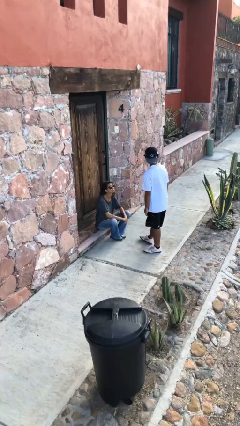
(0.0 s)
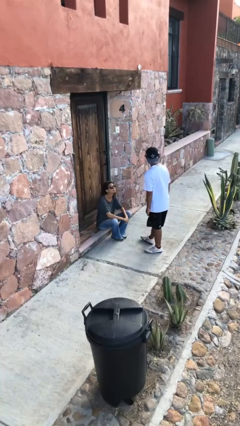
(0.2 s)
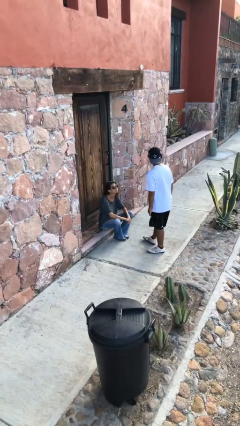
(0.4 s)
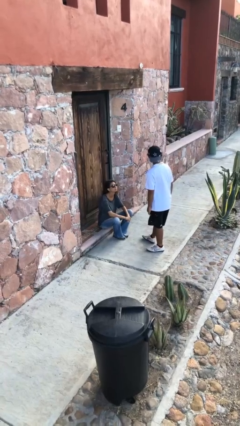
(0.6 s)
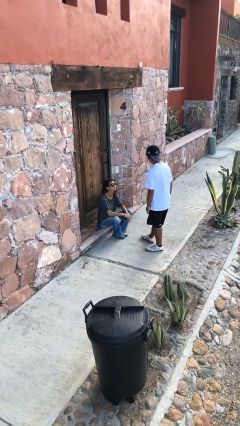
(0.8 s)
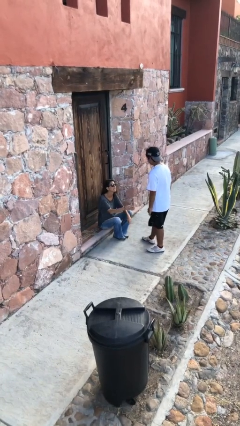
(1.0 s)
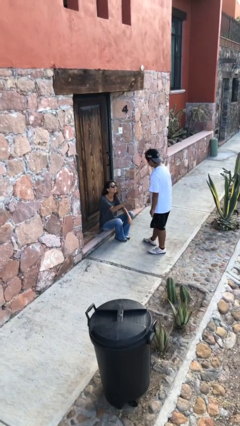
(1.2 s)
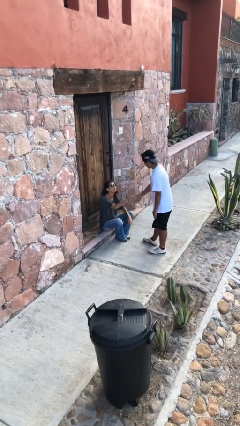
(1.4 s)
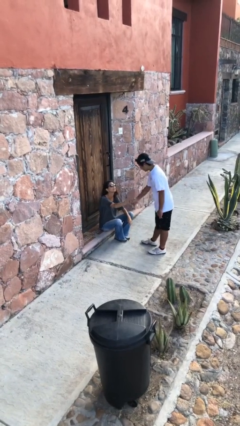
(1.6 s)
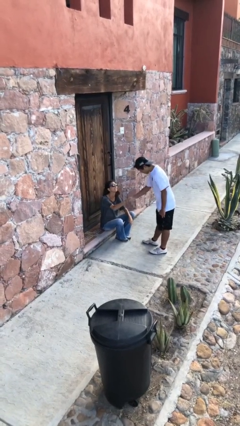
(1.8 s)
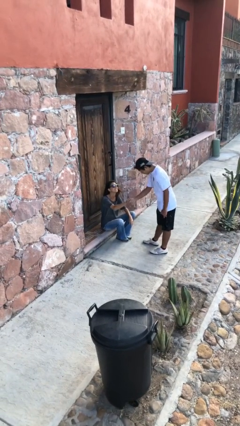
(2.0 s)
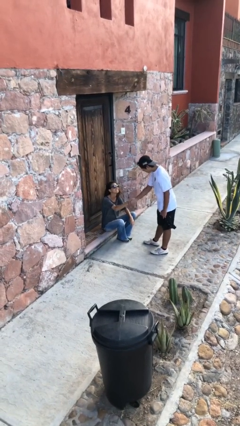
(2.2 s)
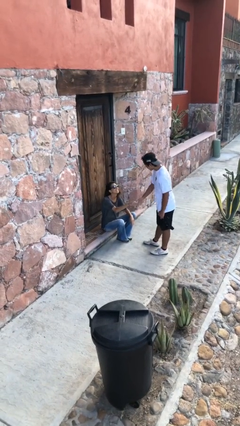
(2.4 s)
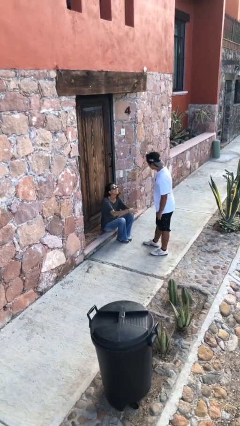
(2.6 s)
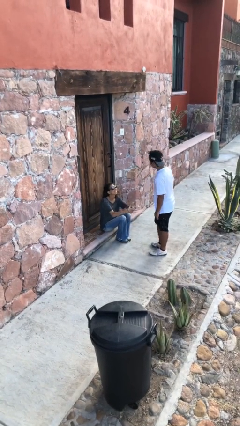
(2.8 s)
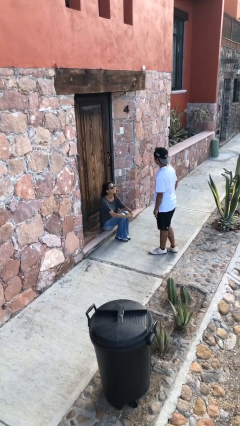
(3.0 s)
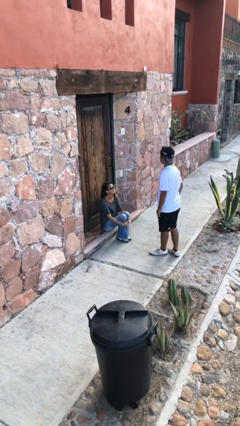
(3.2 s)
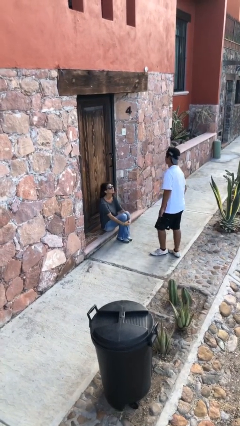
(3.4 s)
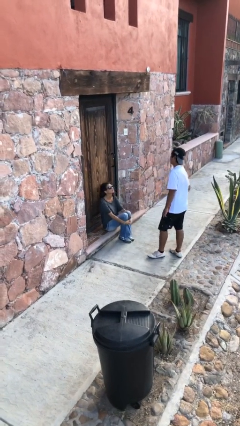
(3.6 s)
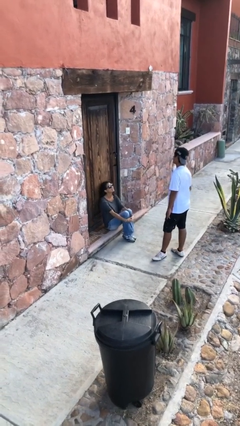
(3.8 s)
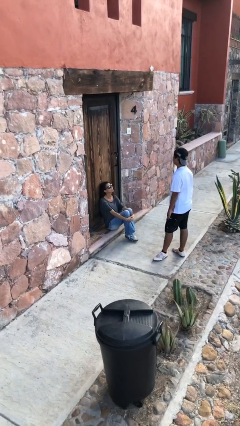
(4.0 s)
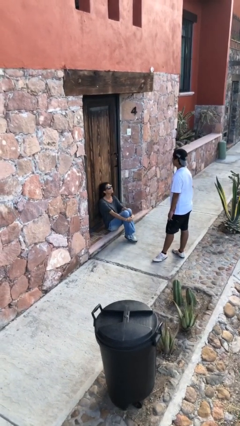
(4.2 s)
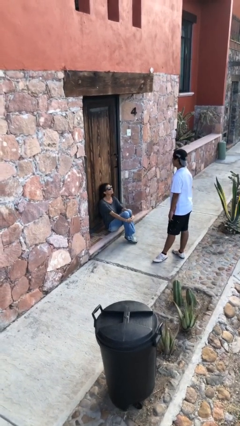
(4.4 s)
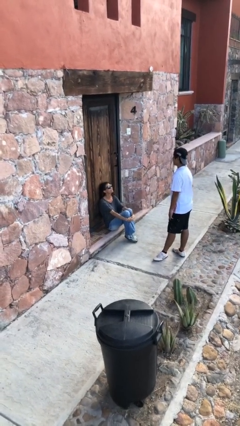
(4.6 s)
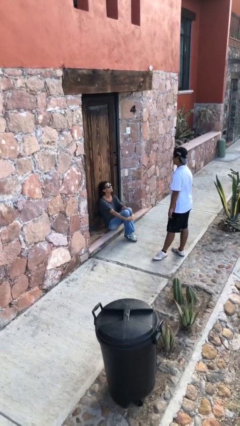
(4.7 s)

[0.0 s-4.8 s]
person shakes hand

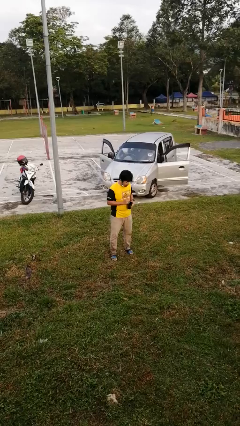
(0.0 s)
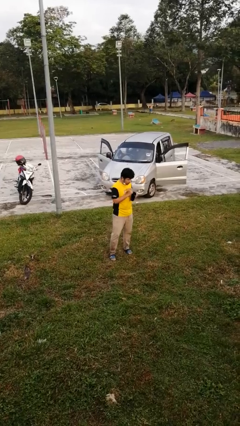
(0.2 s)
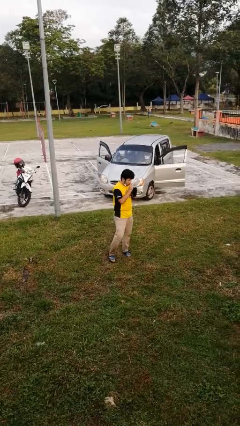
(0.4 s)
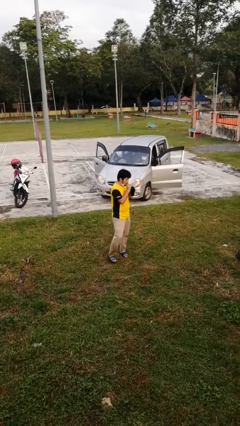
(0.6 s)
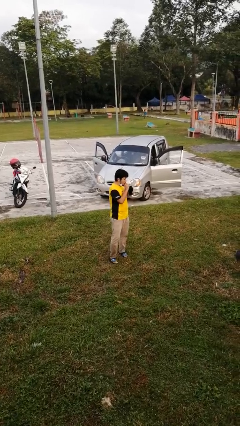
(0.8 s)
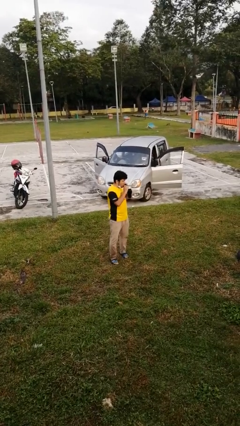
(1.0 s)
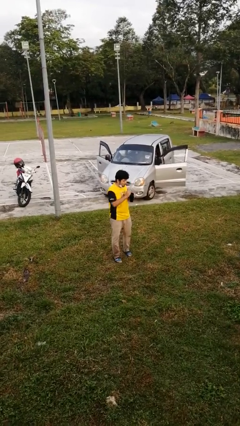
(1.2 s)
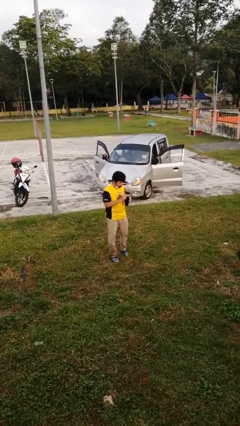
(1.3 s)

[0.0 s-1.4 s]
person drinks from straw

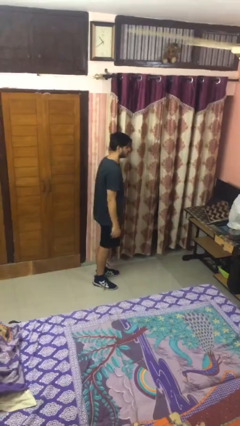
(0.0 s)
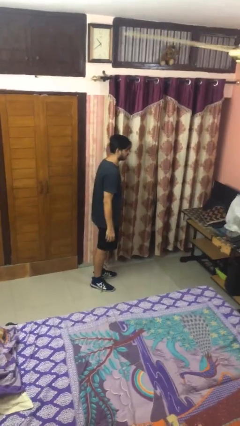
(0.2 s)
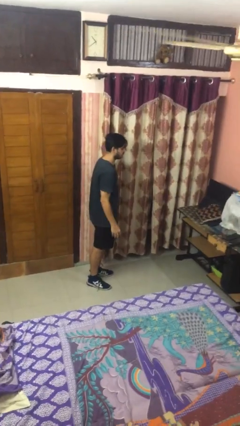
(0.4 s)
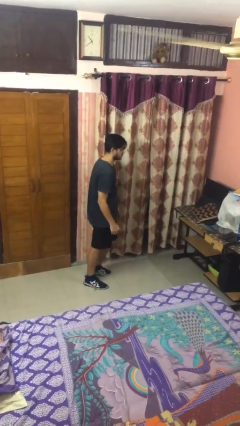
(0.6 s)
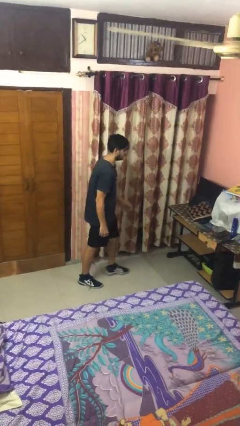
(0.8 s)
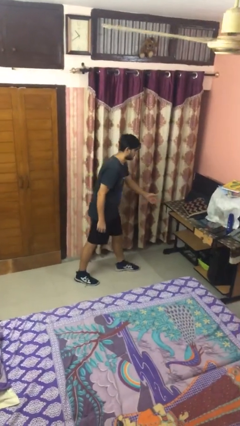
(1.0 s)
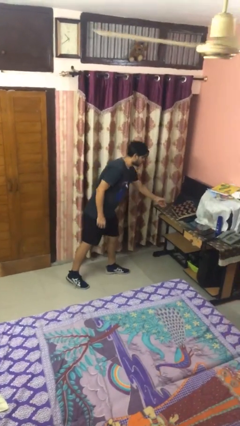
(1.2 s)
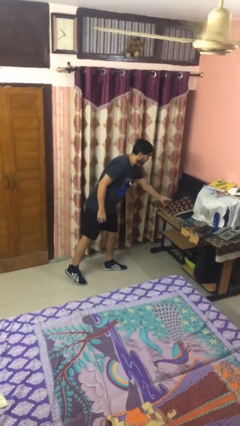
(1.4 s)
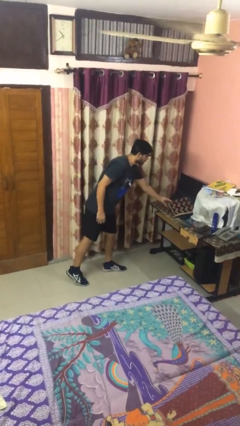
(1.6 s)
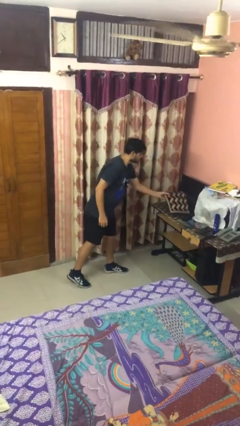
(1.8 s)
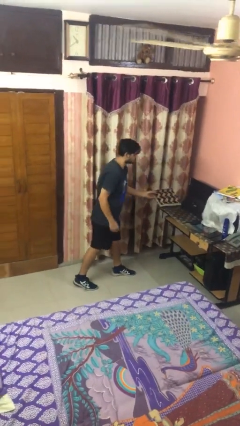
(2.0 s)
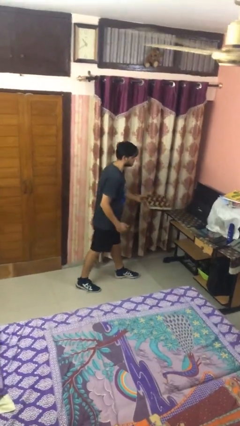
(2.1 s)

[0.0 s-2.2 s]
person picks up object from table

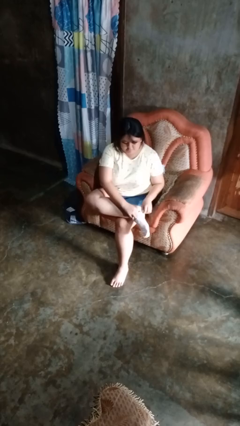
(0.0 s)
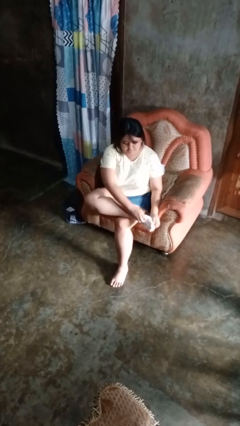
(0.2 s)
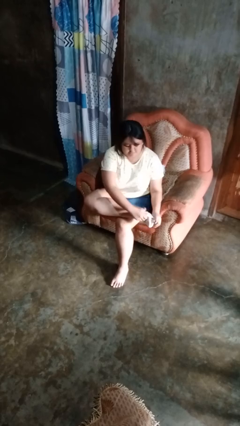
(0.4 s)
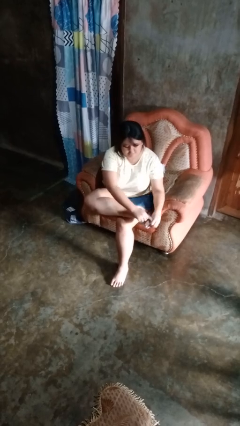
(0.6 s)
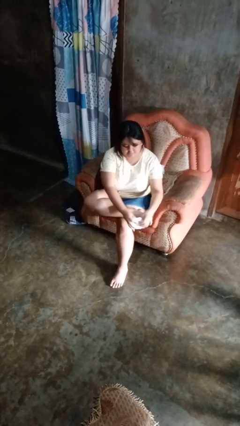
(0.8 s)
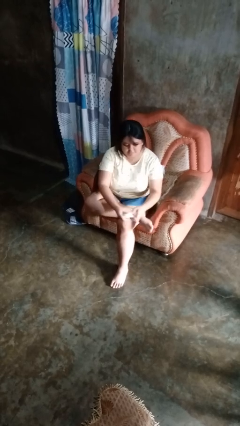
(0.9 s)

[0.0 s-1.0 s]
person takes off socks

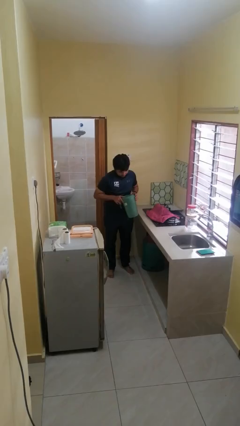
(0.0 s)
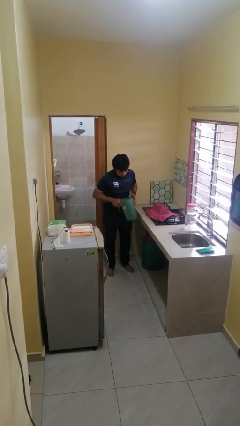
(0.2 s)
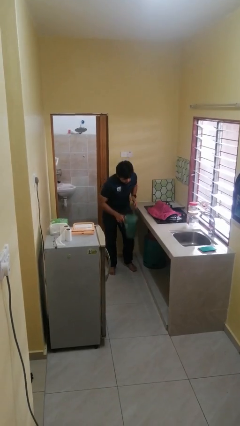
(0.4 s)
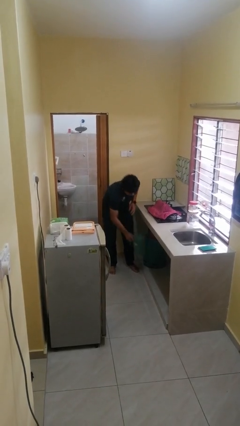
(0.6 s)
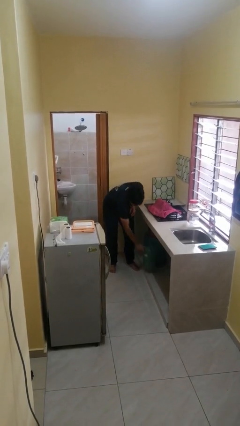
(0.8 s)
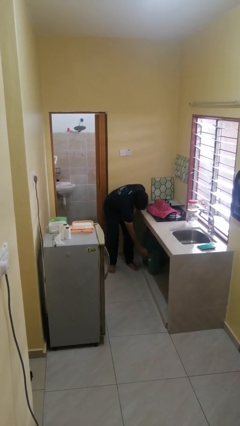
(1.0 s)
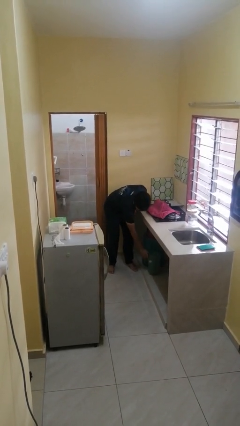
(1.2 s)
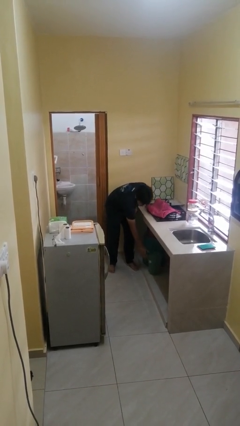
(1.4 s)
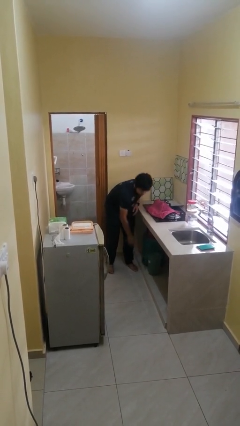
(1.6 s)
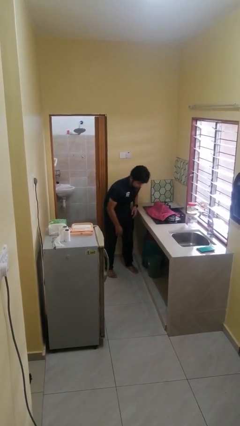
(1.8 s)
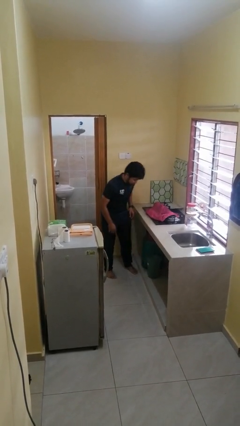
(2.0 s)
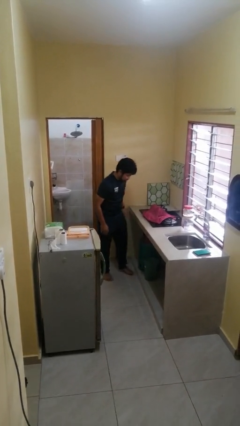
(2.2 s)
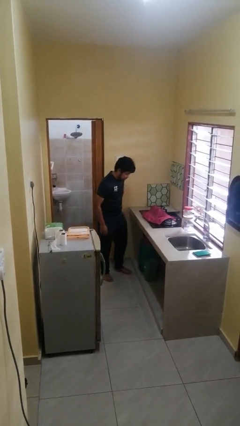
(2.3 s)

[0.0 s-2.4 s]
person puts down object into cabinet

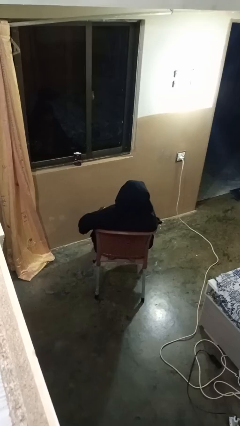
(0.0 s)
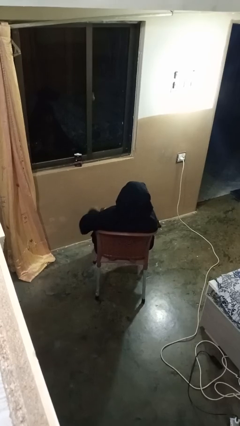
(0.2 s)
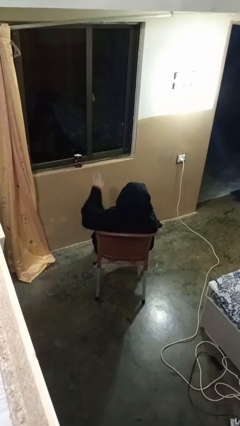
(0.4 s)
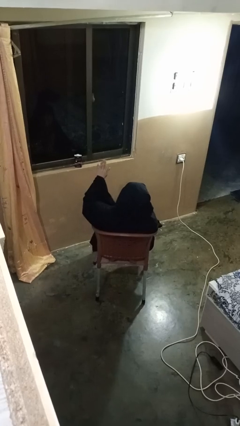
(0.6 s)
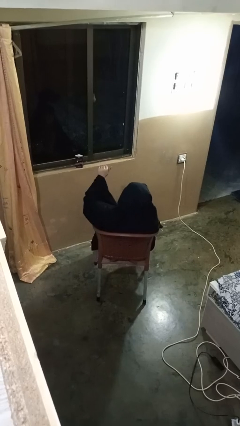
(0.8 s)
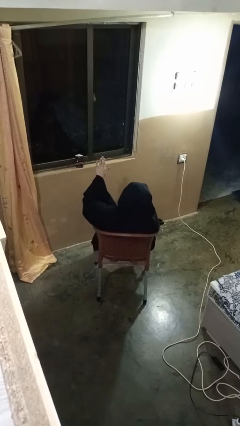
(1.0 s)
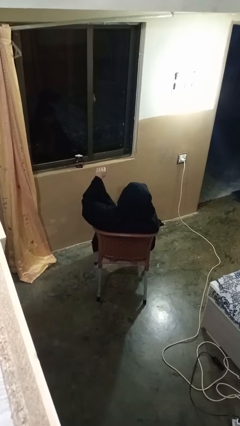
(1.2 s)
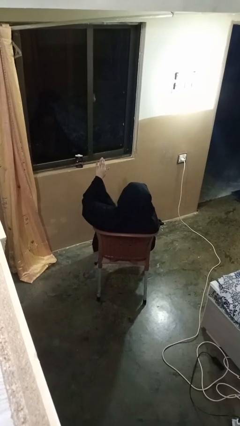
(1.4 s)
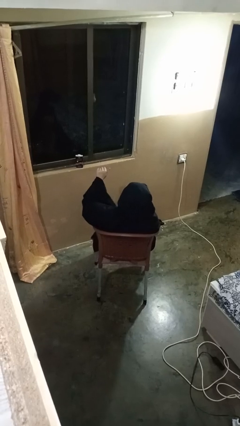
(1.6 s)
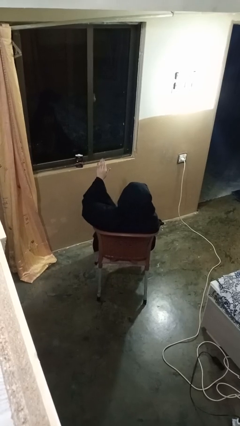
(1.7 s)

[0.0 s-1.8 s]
person gestures come here

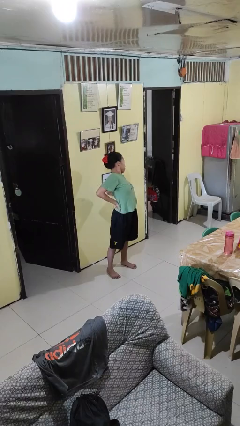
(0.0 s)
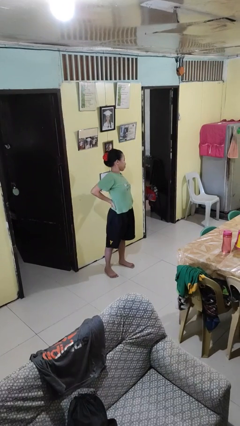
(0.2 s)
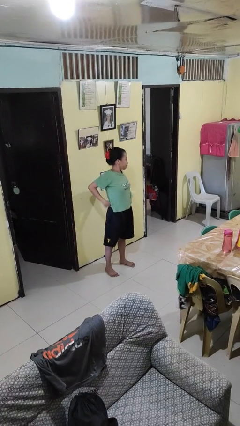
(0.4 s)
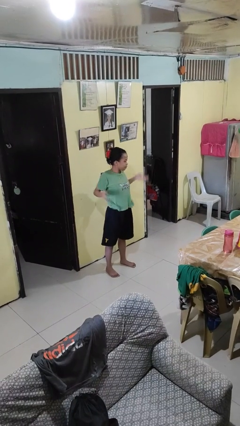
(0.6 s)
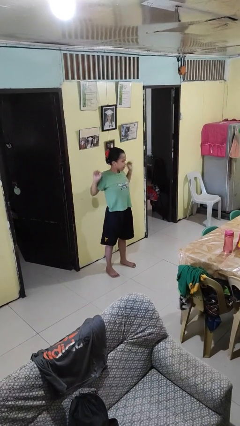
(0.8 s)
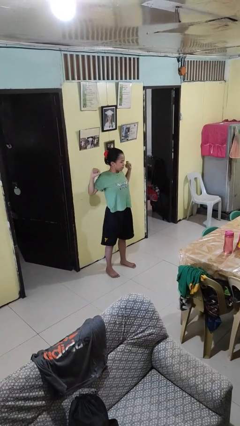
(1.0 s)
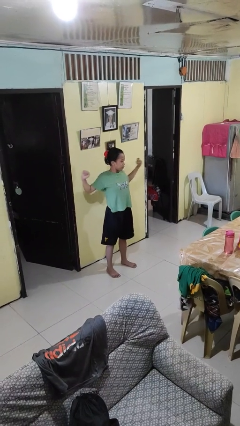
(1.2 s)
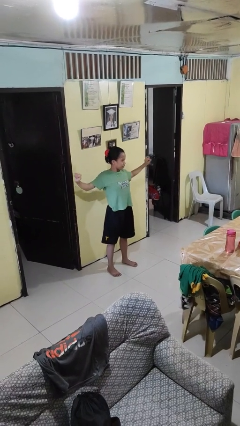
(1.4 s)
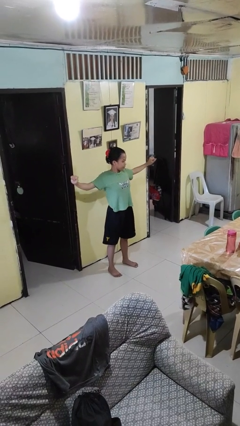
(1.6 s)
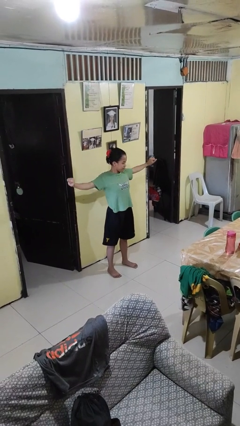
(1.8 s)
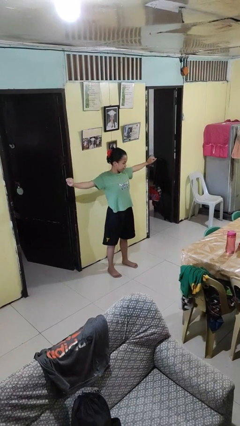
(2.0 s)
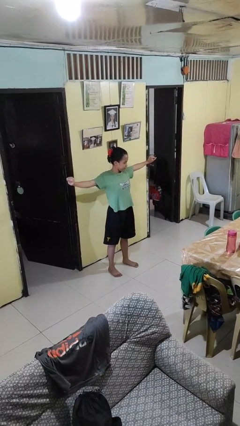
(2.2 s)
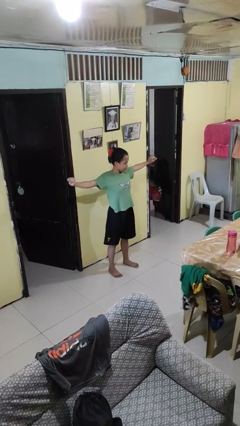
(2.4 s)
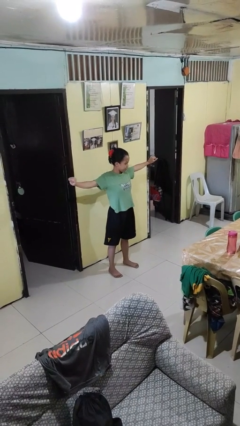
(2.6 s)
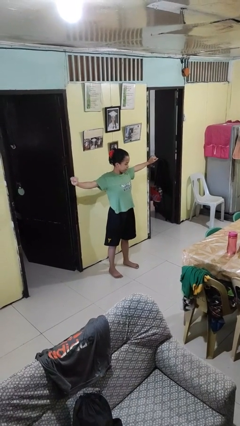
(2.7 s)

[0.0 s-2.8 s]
person stretches arms to side

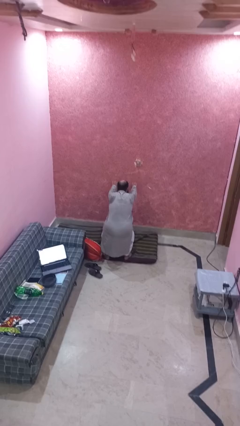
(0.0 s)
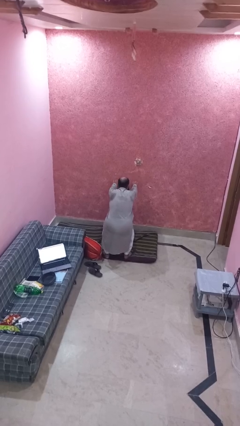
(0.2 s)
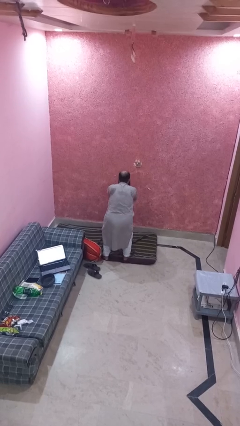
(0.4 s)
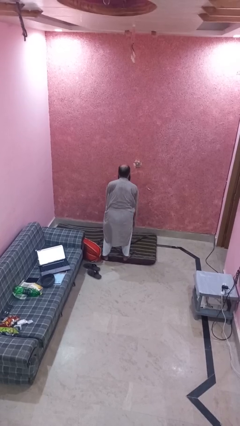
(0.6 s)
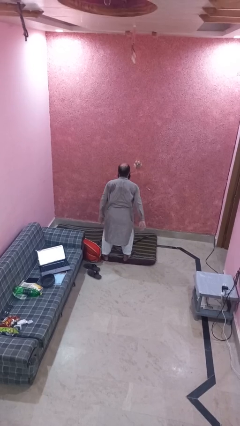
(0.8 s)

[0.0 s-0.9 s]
person stands up
